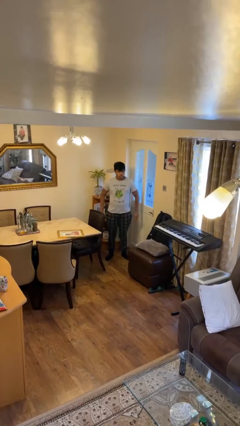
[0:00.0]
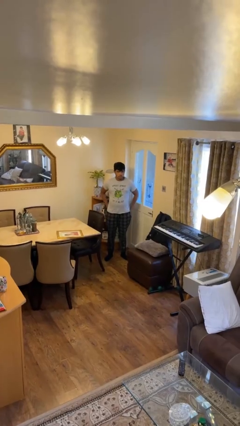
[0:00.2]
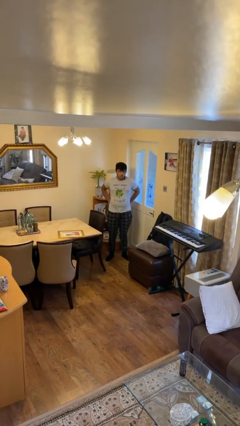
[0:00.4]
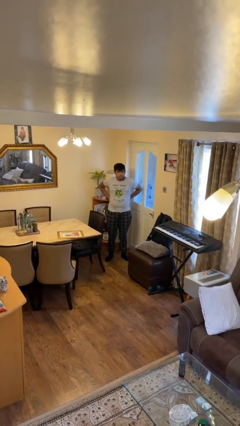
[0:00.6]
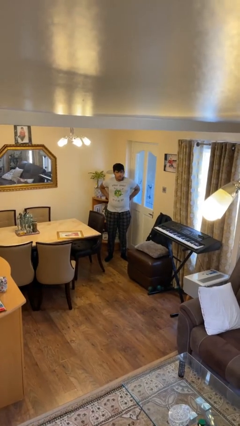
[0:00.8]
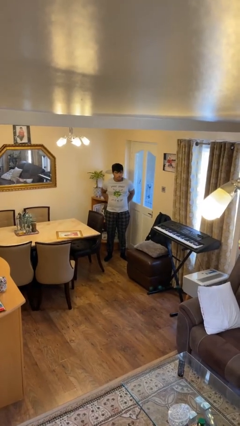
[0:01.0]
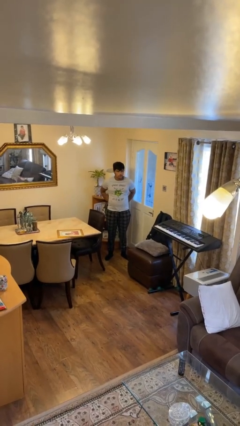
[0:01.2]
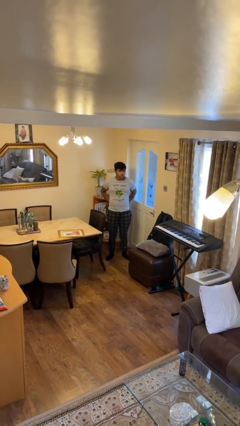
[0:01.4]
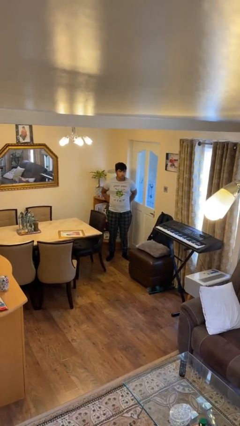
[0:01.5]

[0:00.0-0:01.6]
person puts hands in back pockets

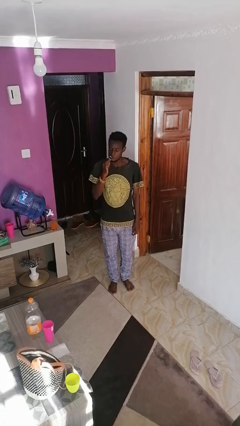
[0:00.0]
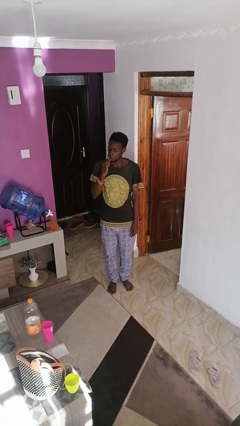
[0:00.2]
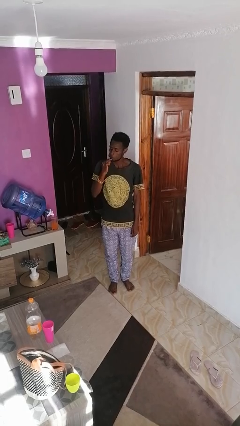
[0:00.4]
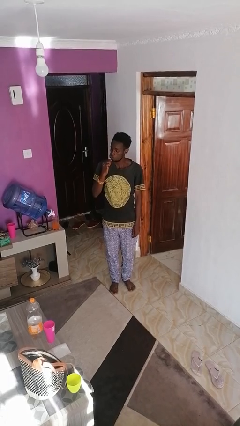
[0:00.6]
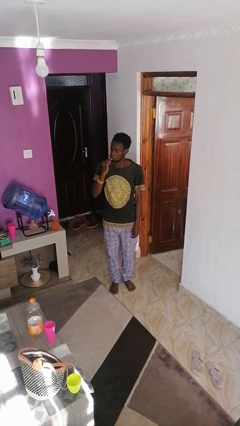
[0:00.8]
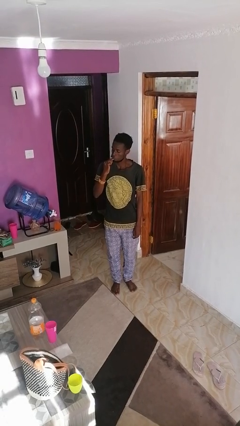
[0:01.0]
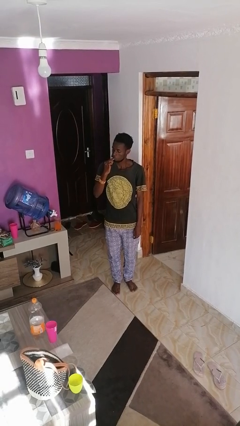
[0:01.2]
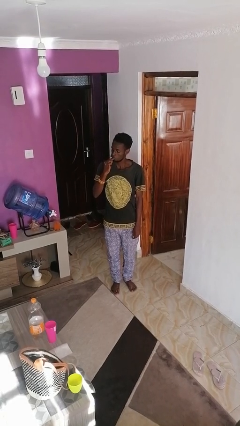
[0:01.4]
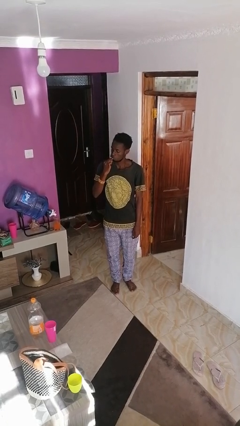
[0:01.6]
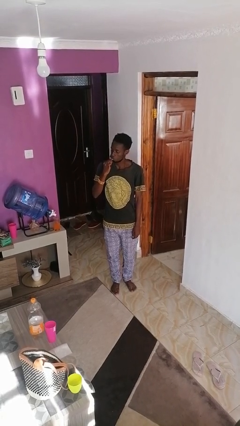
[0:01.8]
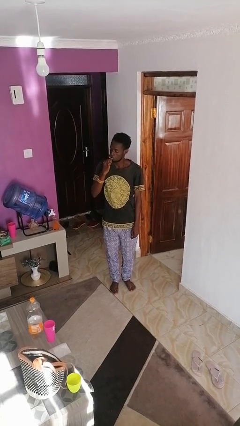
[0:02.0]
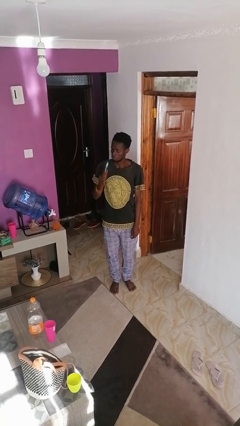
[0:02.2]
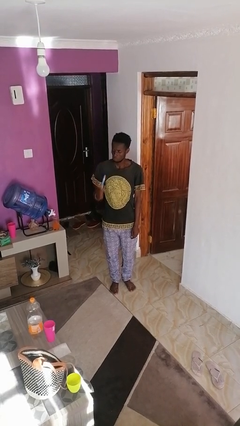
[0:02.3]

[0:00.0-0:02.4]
person brushes teeth

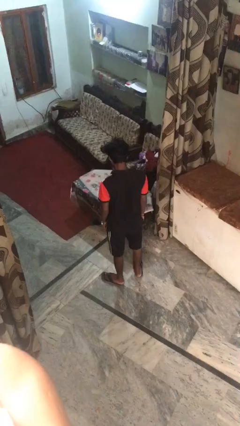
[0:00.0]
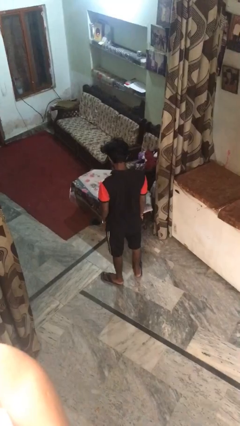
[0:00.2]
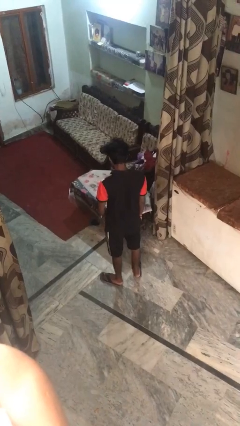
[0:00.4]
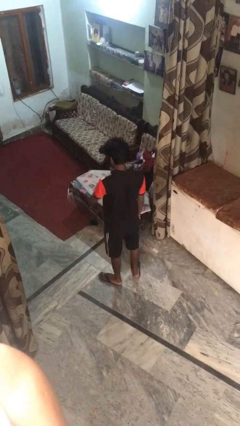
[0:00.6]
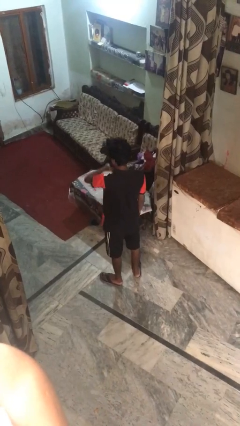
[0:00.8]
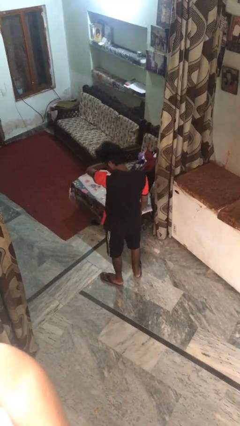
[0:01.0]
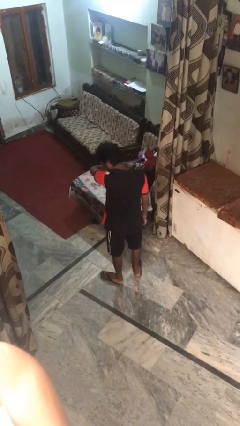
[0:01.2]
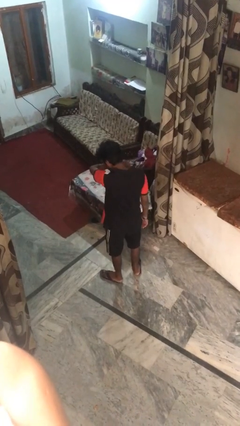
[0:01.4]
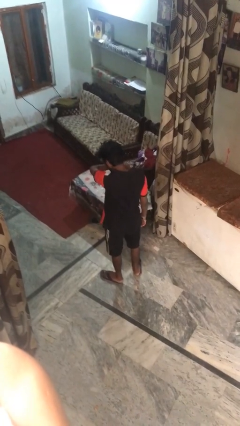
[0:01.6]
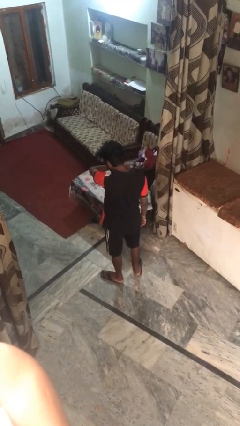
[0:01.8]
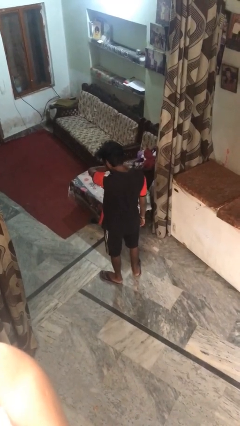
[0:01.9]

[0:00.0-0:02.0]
person sneezes into arm

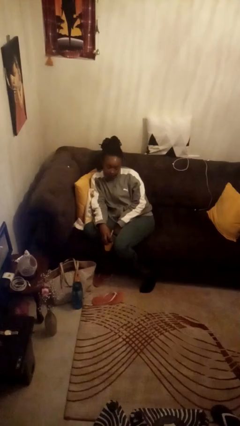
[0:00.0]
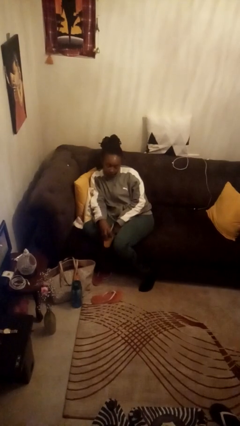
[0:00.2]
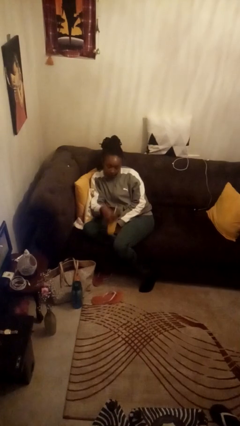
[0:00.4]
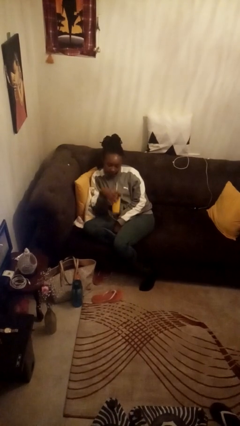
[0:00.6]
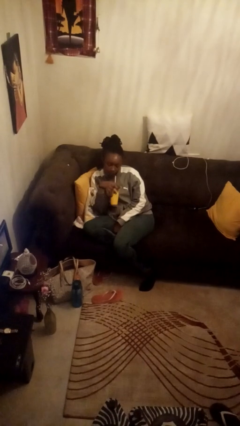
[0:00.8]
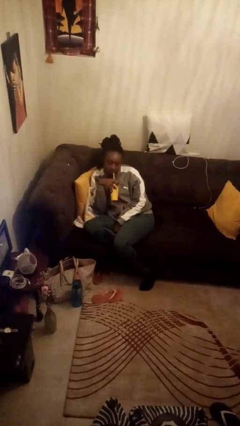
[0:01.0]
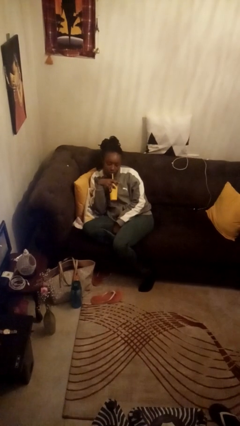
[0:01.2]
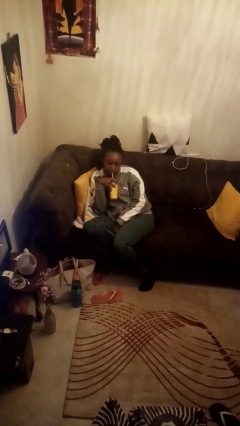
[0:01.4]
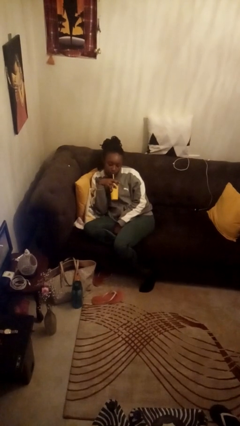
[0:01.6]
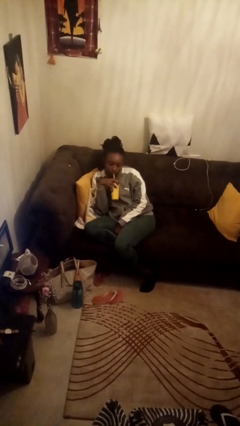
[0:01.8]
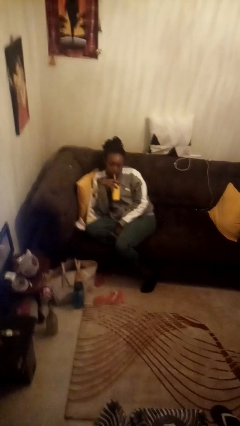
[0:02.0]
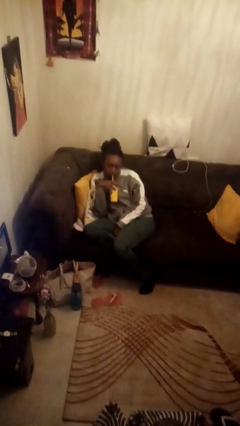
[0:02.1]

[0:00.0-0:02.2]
person drinks from straw

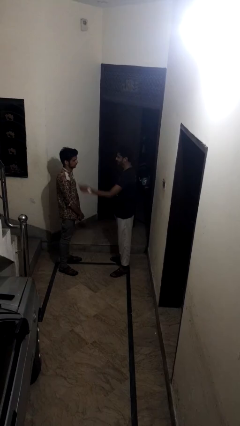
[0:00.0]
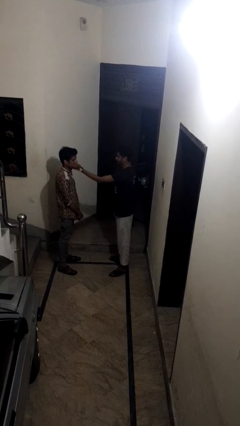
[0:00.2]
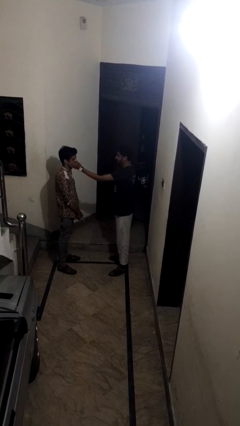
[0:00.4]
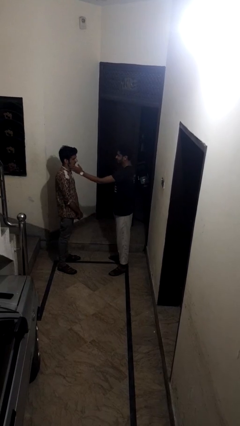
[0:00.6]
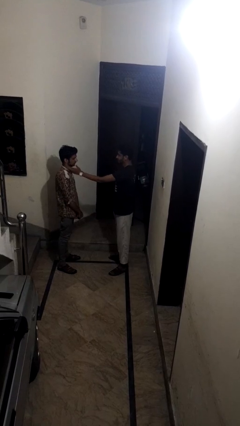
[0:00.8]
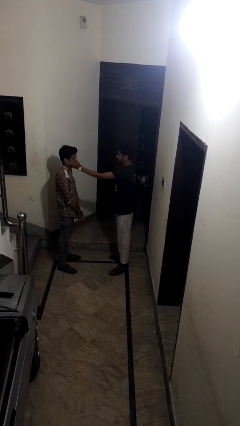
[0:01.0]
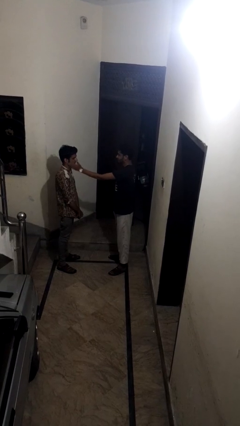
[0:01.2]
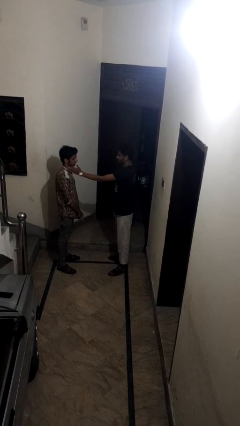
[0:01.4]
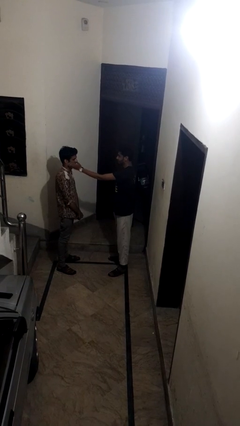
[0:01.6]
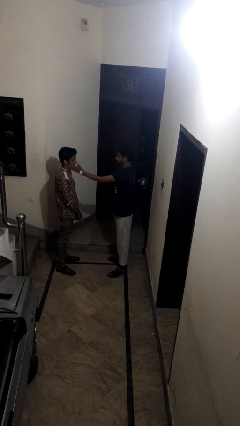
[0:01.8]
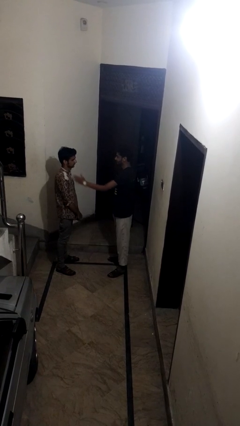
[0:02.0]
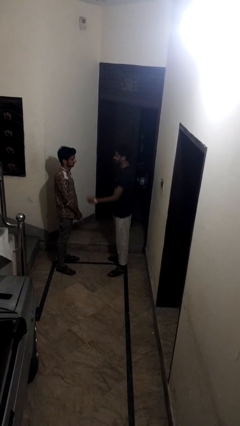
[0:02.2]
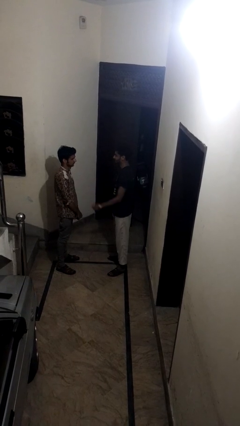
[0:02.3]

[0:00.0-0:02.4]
person touches face of person

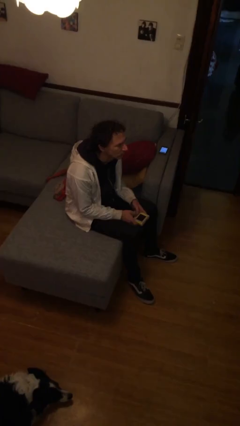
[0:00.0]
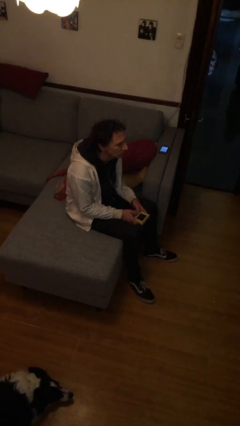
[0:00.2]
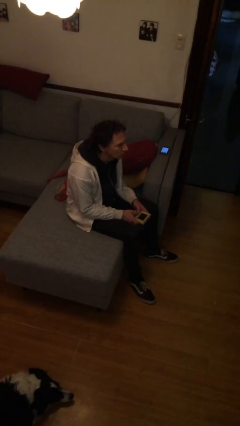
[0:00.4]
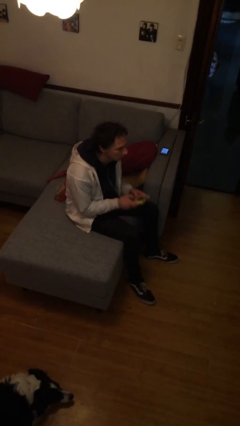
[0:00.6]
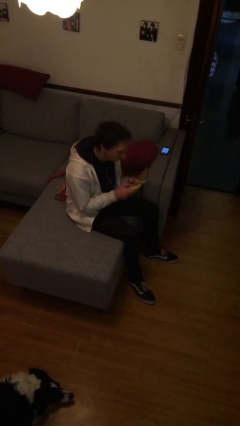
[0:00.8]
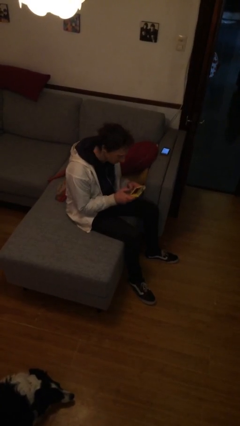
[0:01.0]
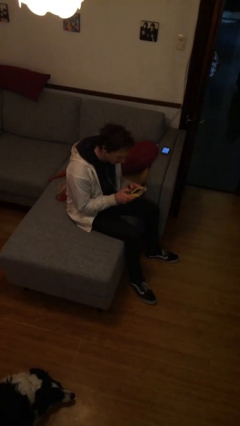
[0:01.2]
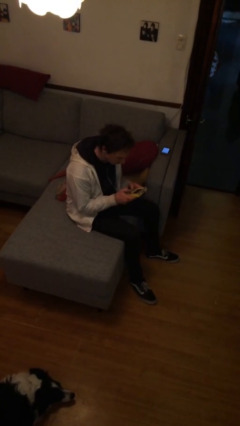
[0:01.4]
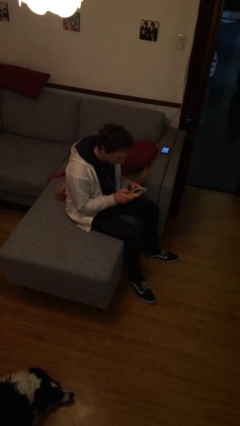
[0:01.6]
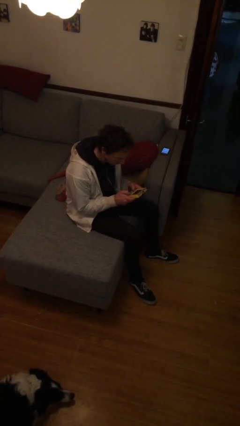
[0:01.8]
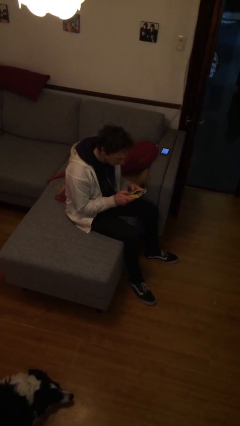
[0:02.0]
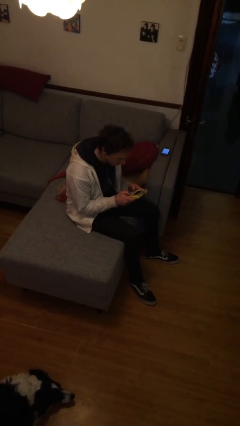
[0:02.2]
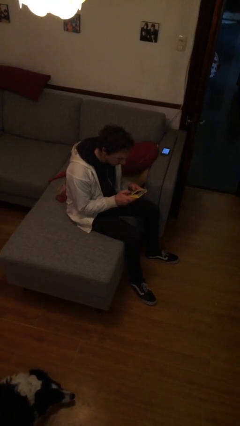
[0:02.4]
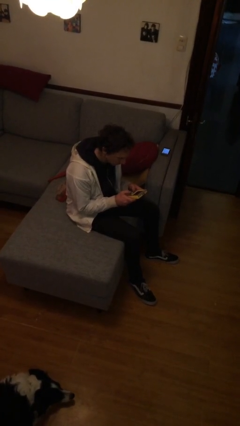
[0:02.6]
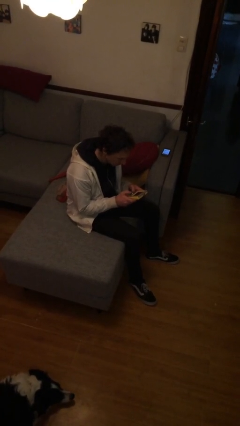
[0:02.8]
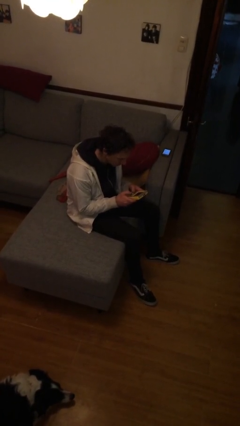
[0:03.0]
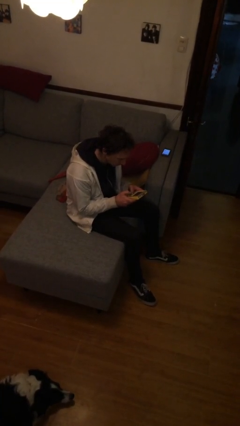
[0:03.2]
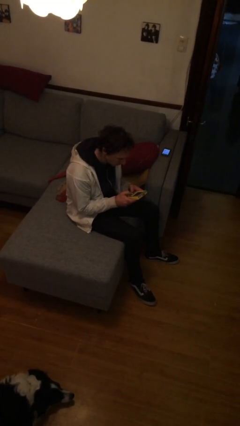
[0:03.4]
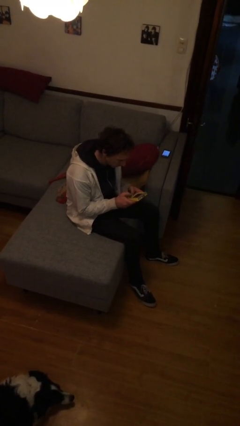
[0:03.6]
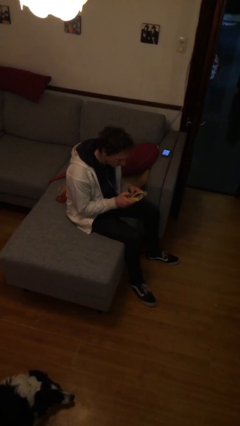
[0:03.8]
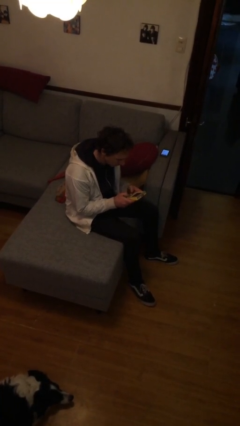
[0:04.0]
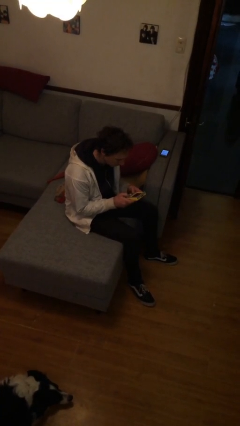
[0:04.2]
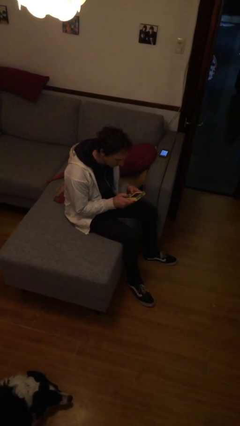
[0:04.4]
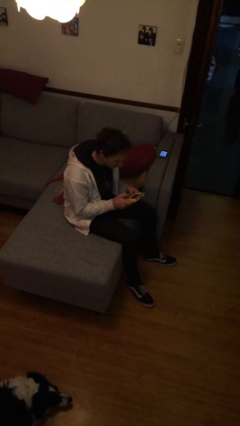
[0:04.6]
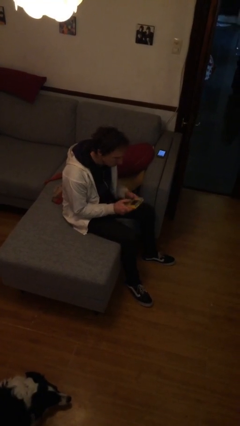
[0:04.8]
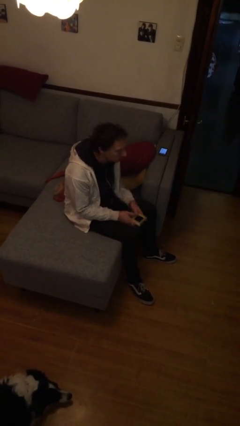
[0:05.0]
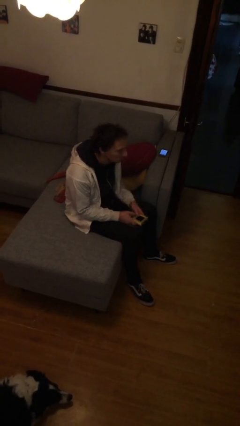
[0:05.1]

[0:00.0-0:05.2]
person interacts with handheld game

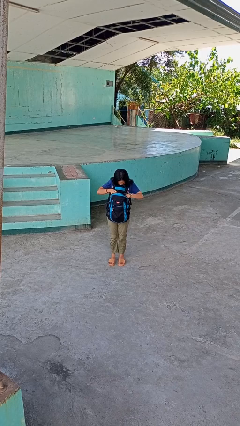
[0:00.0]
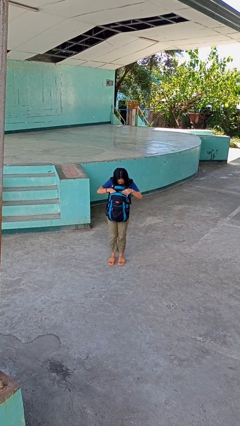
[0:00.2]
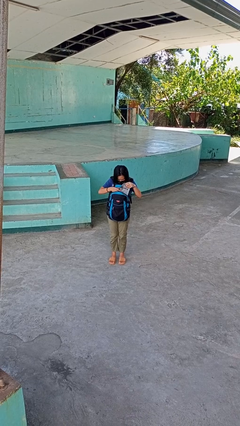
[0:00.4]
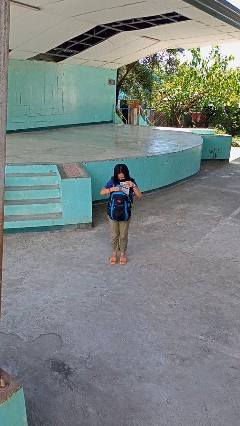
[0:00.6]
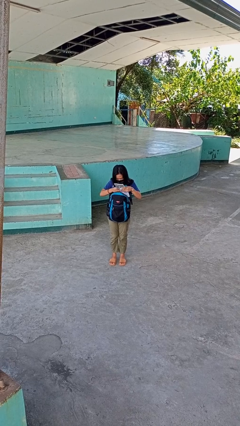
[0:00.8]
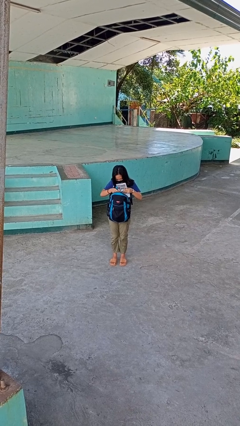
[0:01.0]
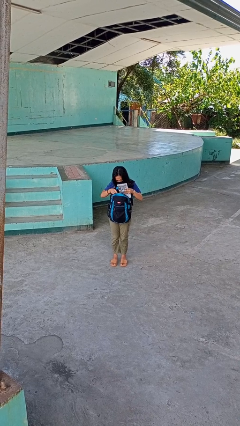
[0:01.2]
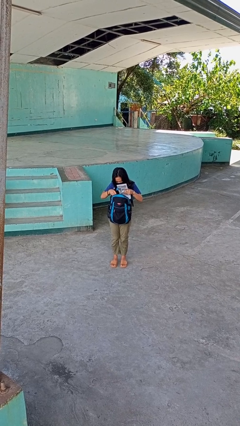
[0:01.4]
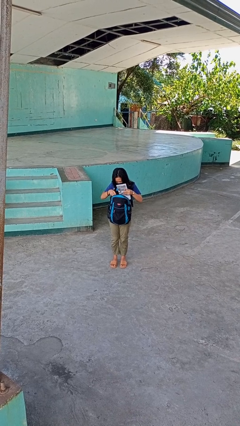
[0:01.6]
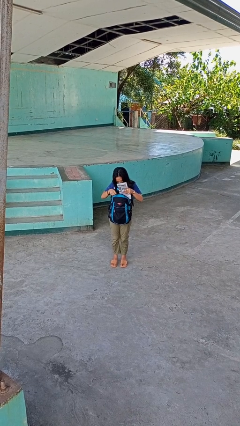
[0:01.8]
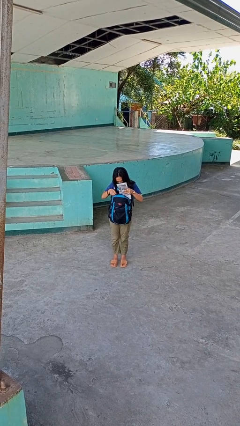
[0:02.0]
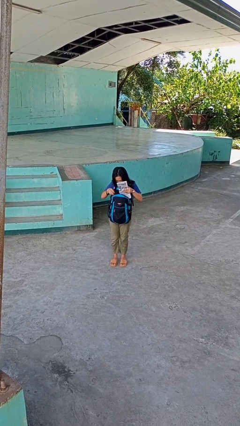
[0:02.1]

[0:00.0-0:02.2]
person takes object from backpack
